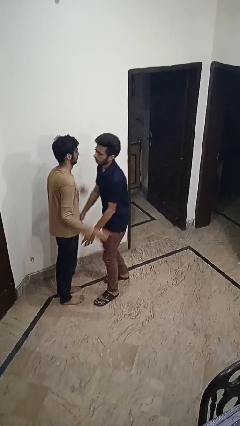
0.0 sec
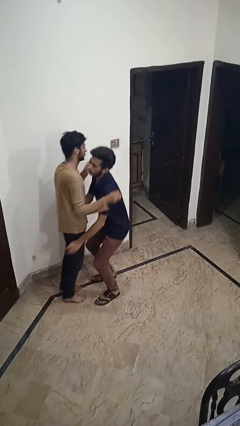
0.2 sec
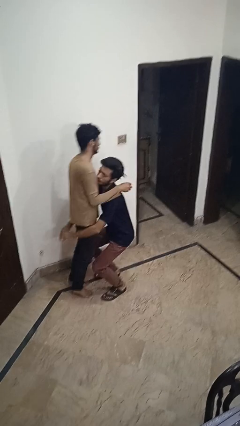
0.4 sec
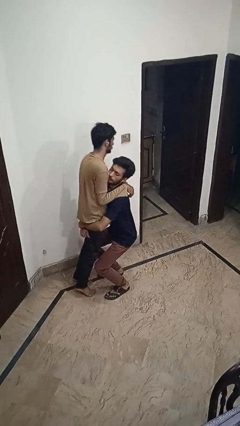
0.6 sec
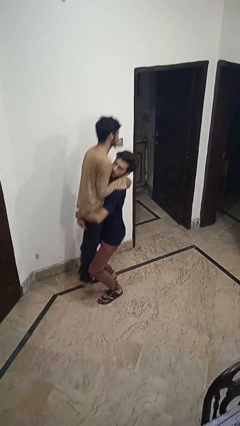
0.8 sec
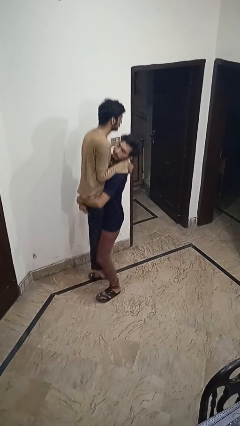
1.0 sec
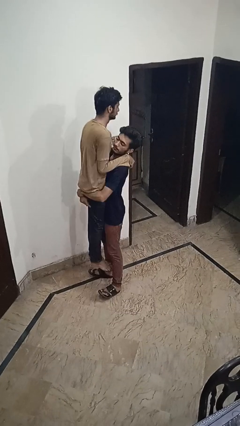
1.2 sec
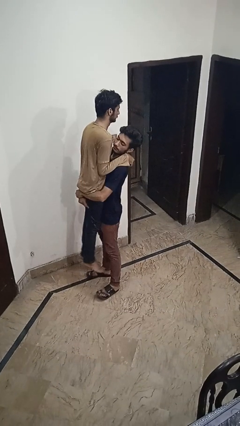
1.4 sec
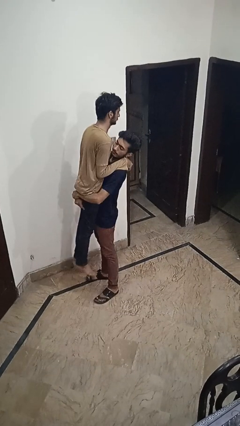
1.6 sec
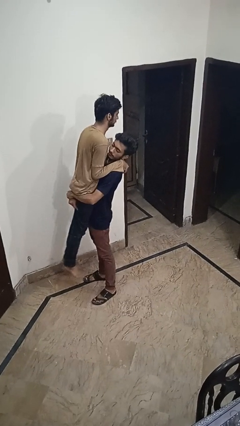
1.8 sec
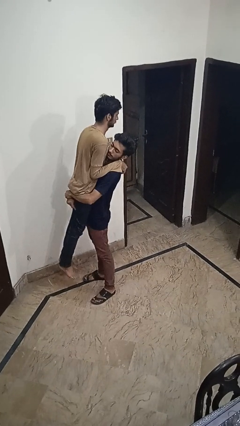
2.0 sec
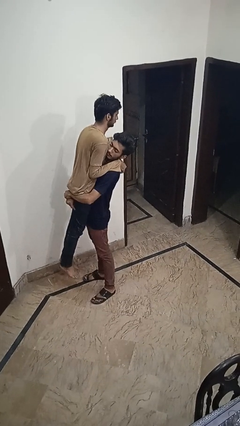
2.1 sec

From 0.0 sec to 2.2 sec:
person picks up person

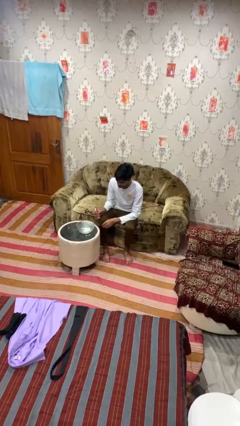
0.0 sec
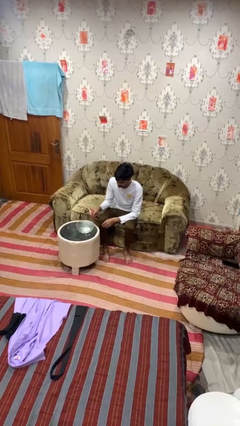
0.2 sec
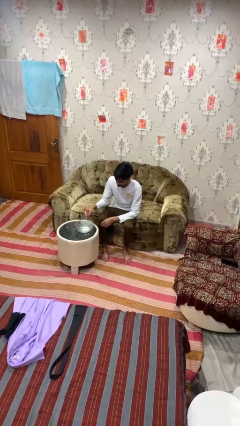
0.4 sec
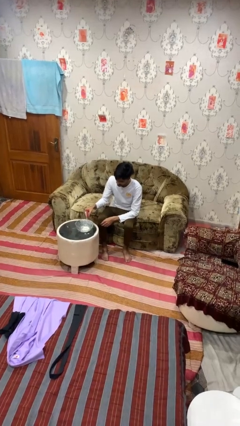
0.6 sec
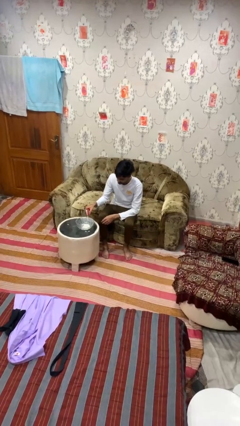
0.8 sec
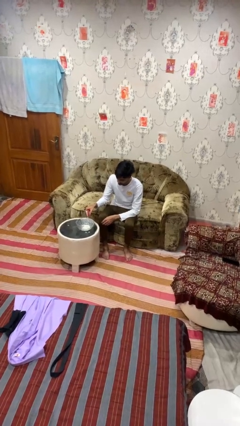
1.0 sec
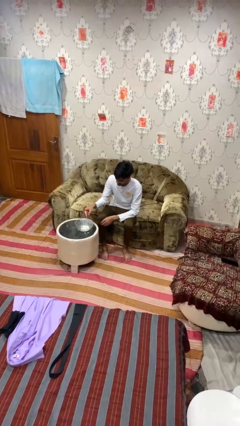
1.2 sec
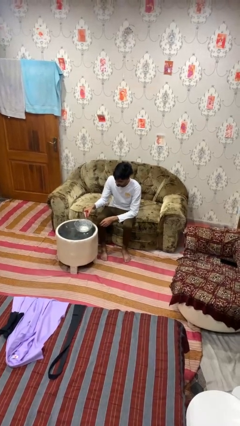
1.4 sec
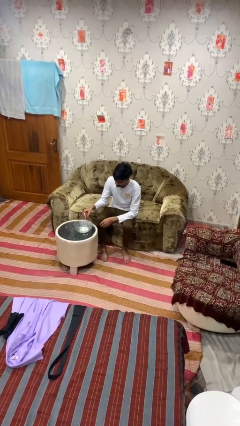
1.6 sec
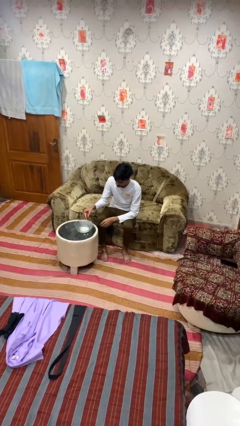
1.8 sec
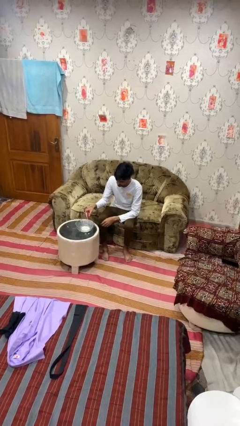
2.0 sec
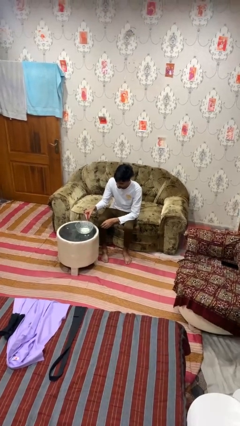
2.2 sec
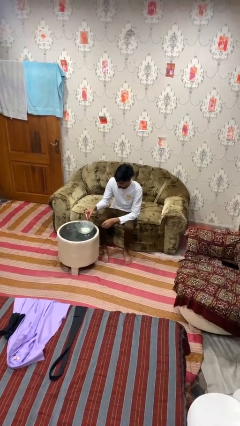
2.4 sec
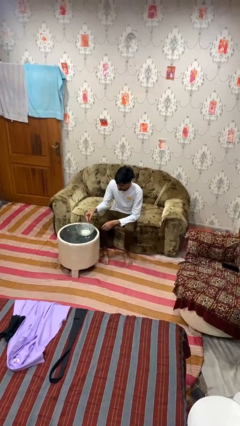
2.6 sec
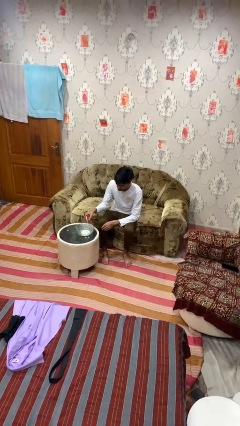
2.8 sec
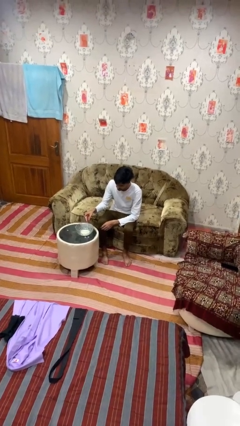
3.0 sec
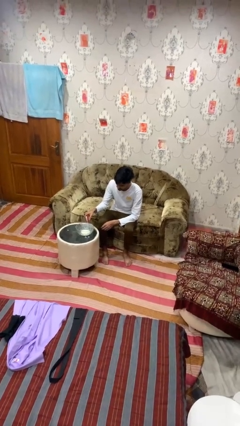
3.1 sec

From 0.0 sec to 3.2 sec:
person pours into bowl

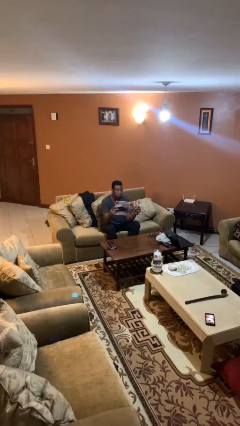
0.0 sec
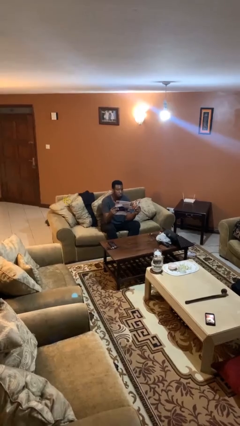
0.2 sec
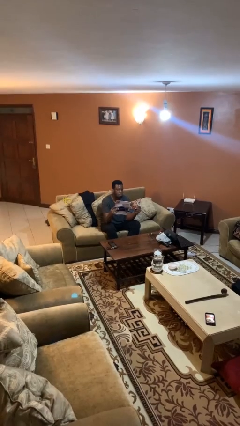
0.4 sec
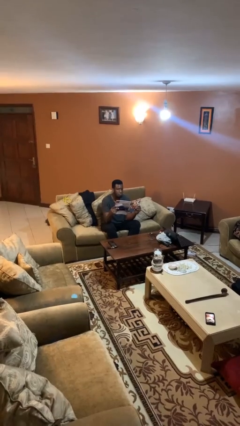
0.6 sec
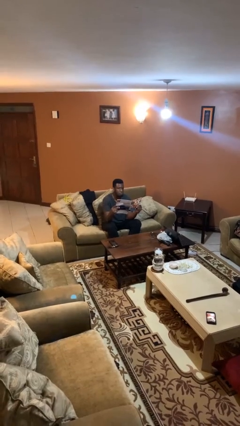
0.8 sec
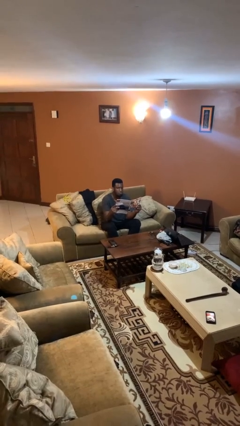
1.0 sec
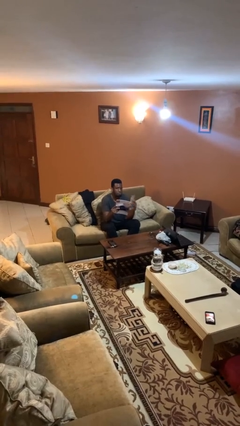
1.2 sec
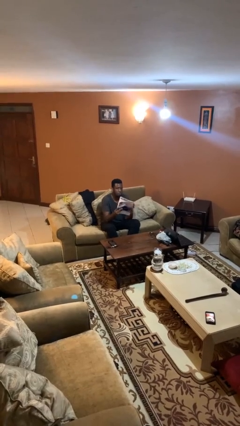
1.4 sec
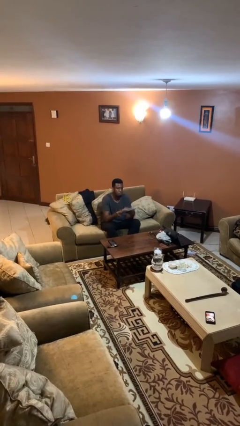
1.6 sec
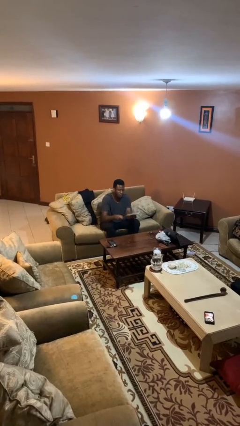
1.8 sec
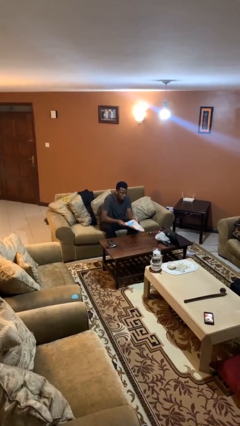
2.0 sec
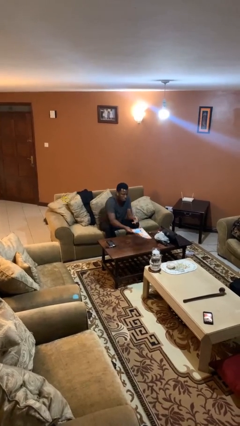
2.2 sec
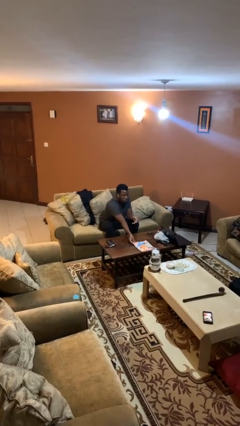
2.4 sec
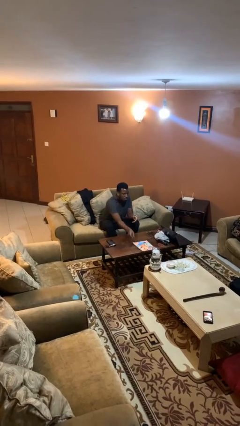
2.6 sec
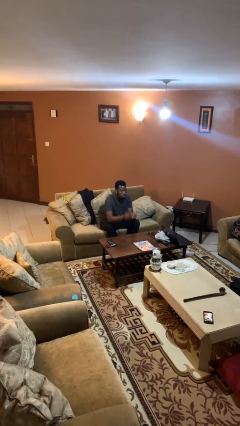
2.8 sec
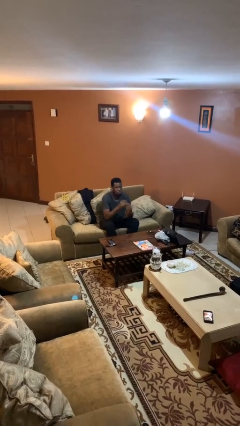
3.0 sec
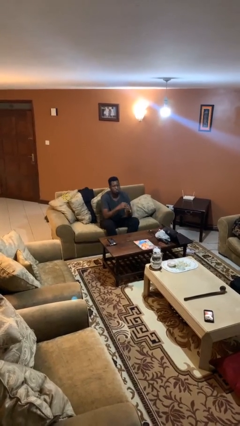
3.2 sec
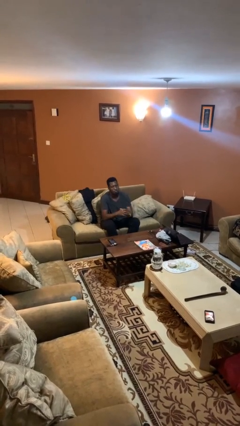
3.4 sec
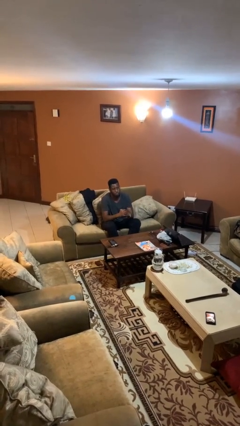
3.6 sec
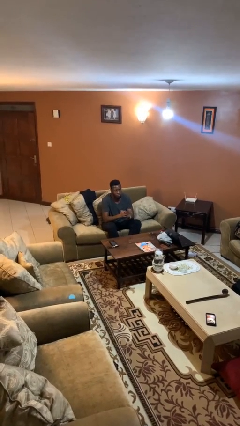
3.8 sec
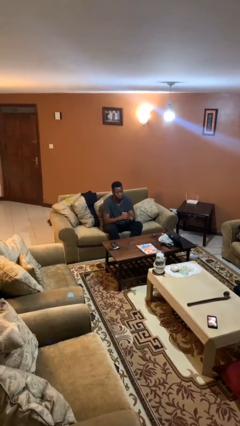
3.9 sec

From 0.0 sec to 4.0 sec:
person puts down object on table

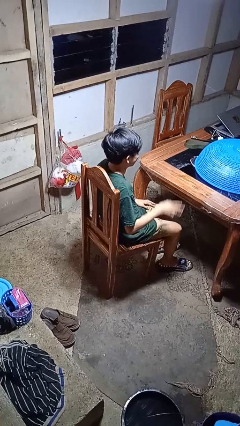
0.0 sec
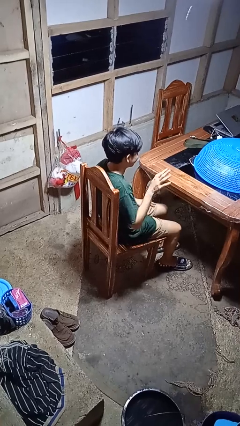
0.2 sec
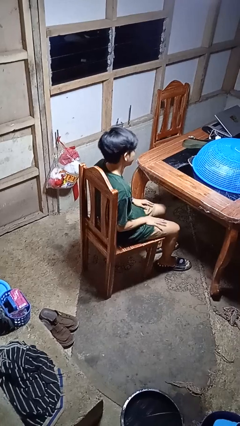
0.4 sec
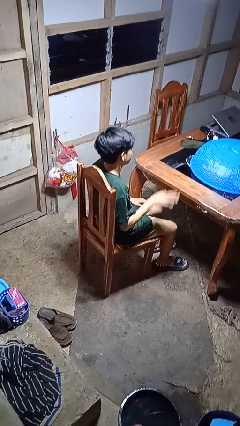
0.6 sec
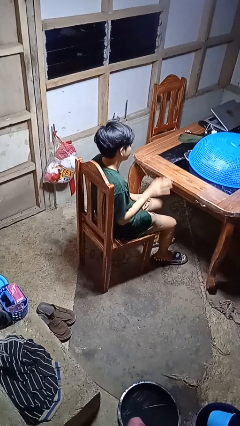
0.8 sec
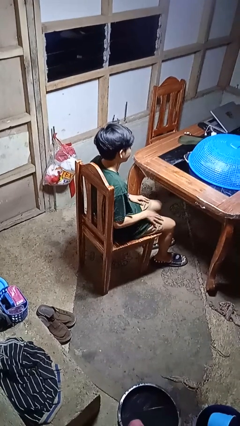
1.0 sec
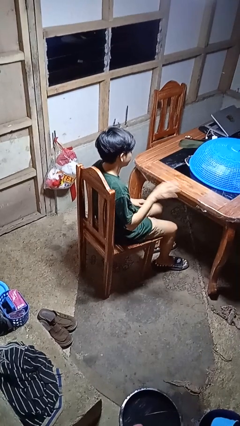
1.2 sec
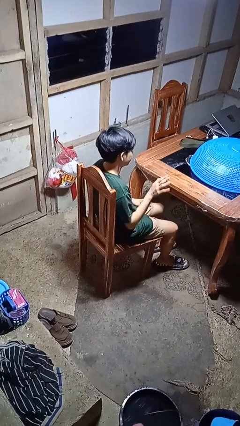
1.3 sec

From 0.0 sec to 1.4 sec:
person slaps hands on thighs

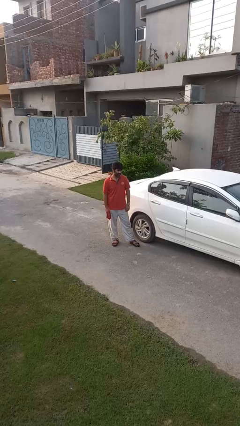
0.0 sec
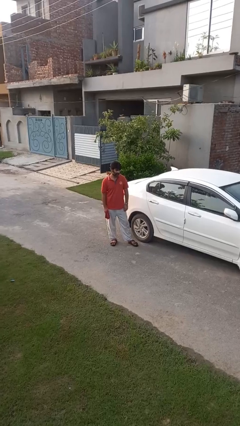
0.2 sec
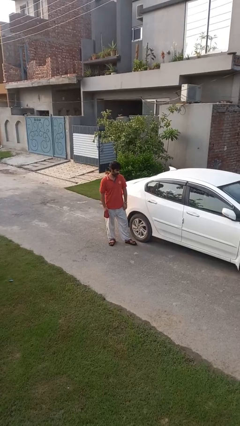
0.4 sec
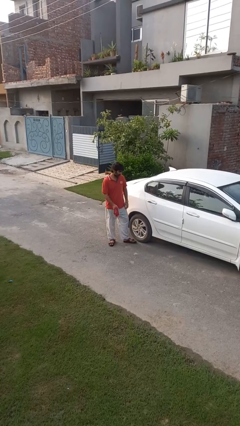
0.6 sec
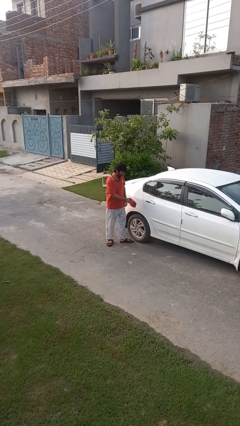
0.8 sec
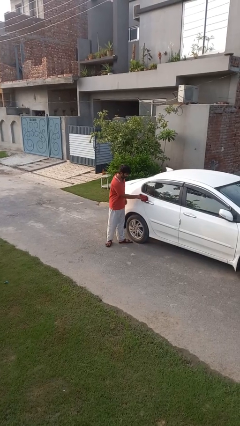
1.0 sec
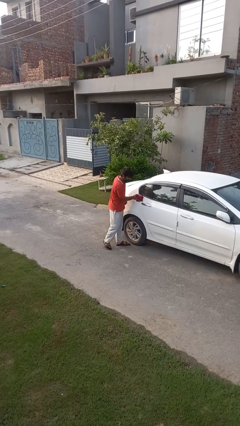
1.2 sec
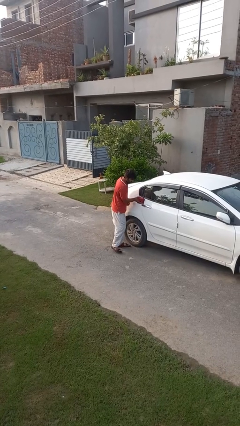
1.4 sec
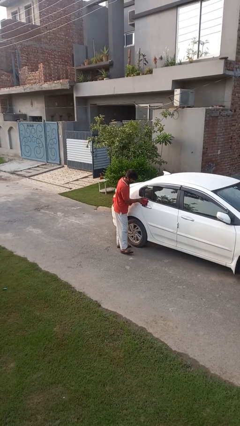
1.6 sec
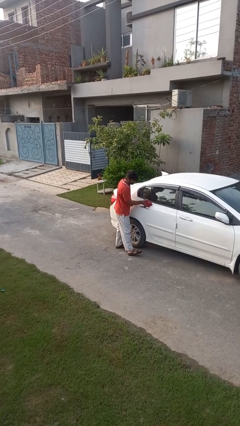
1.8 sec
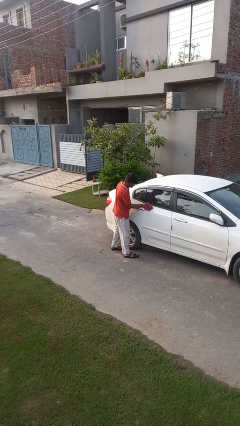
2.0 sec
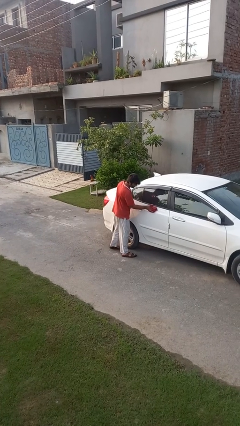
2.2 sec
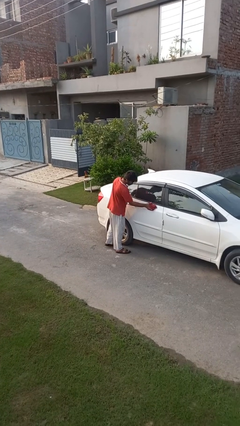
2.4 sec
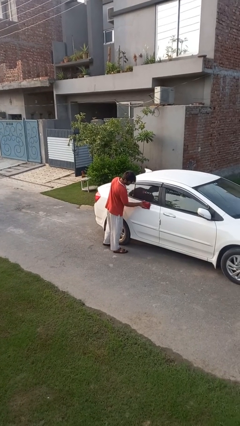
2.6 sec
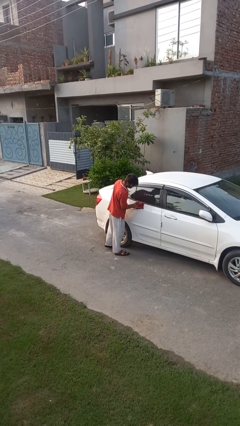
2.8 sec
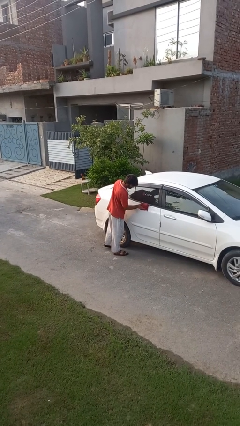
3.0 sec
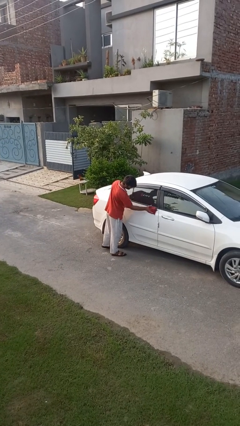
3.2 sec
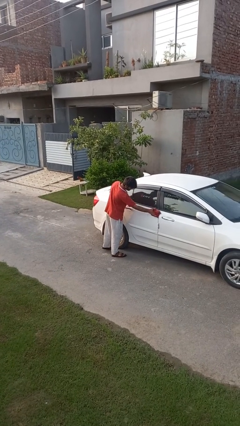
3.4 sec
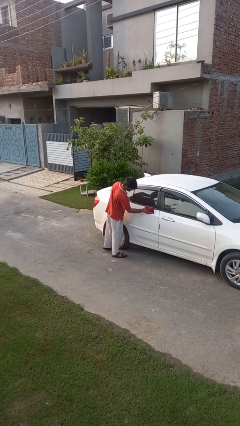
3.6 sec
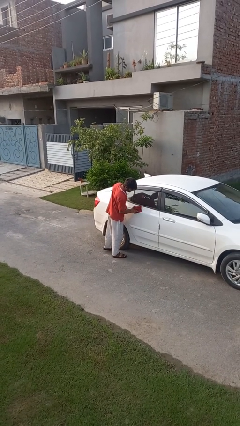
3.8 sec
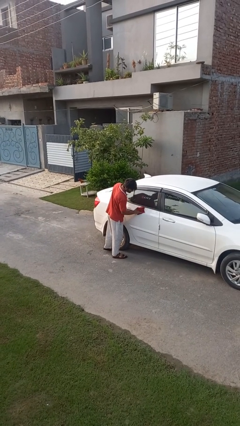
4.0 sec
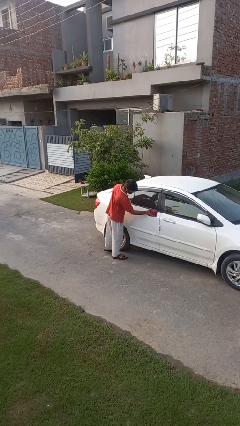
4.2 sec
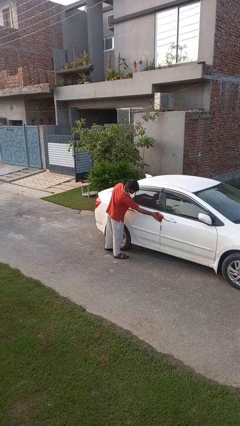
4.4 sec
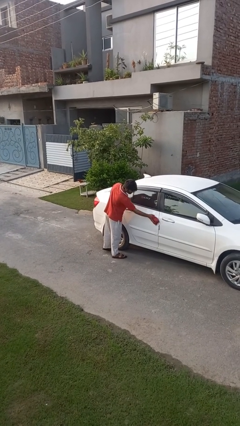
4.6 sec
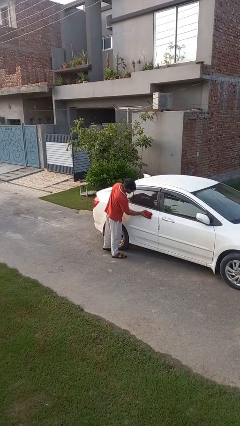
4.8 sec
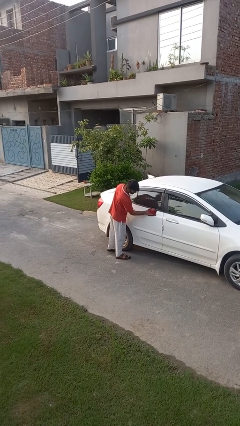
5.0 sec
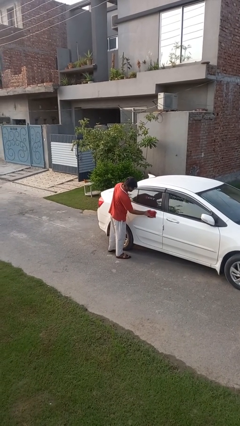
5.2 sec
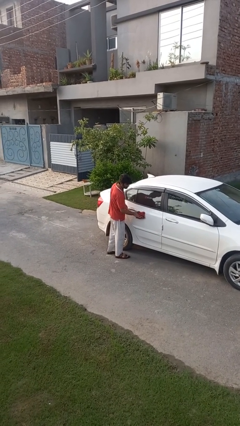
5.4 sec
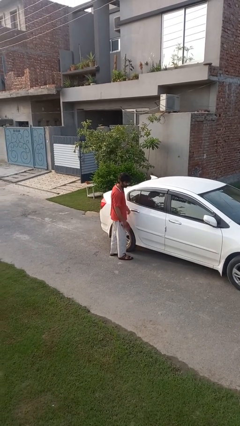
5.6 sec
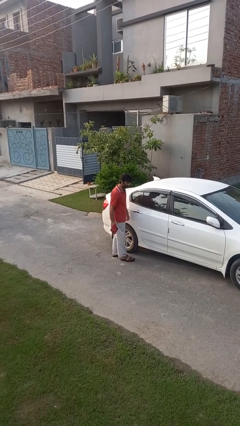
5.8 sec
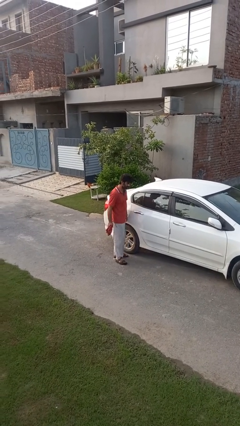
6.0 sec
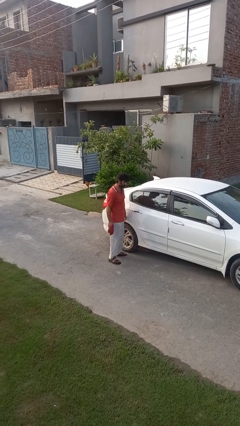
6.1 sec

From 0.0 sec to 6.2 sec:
person polishes car with rag
